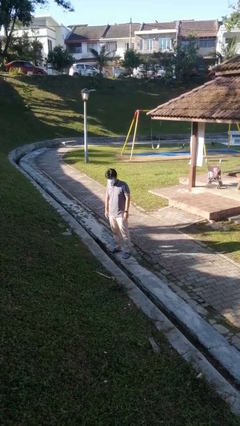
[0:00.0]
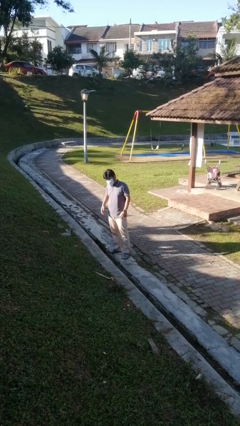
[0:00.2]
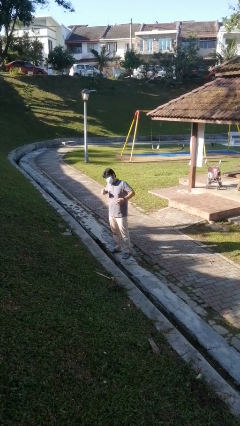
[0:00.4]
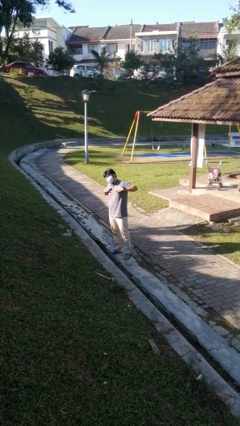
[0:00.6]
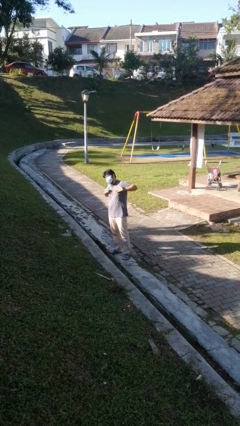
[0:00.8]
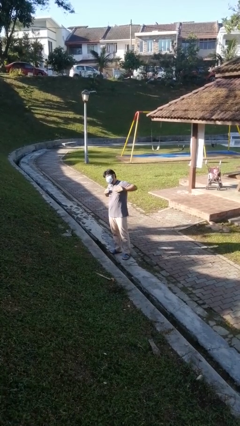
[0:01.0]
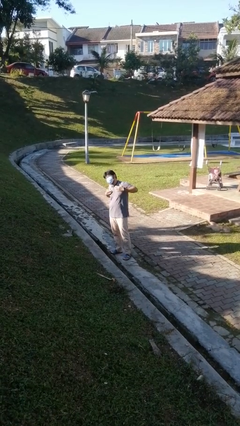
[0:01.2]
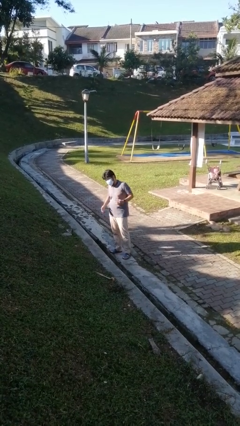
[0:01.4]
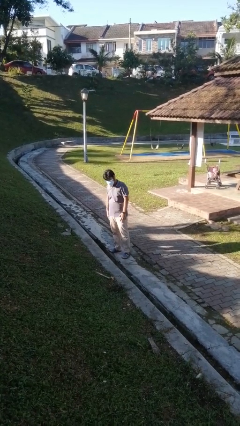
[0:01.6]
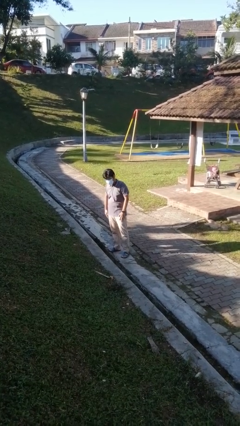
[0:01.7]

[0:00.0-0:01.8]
person drums on chest

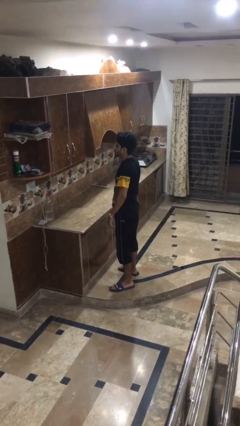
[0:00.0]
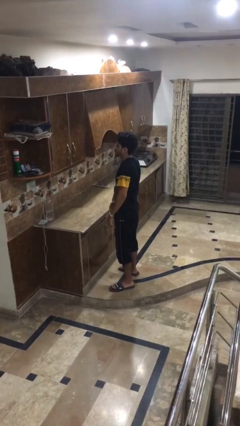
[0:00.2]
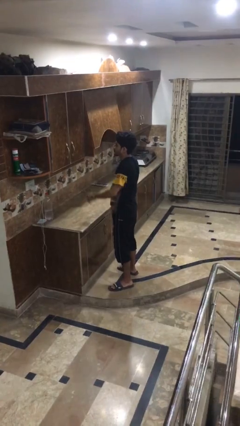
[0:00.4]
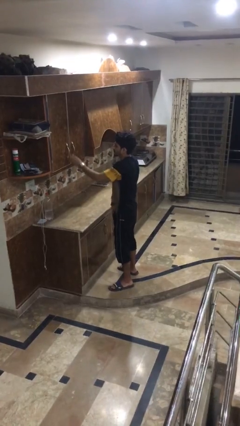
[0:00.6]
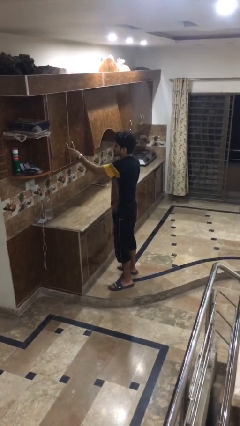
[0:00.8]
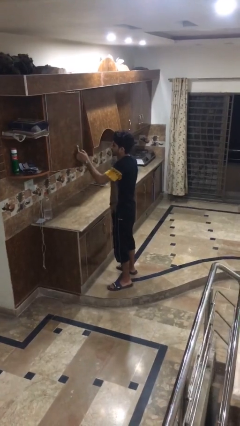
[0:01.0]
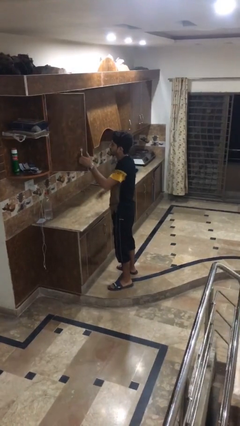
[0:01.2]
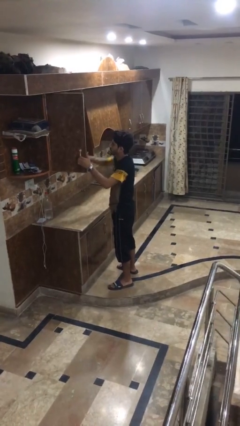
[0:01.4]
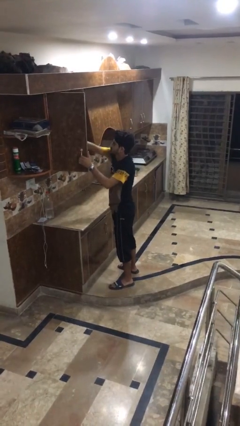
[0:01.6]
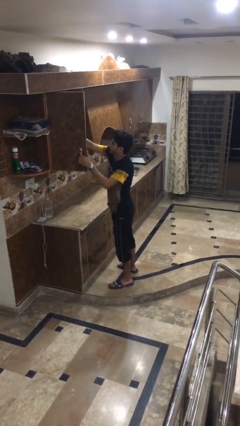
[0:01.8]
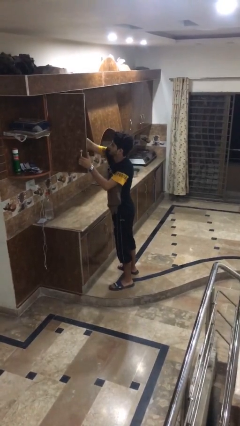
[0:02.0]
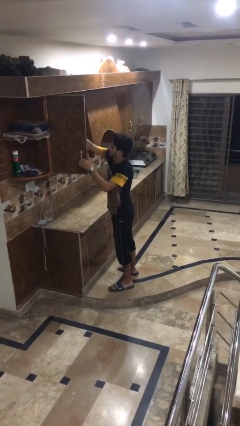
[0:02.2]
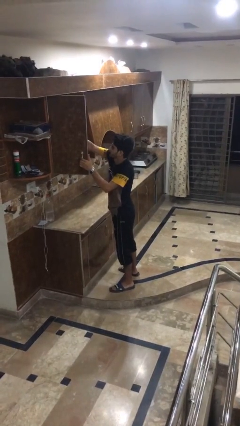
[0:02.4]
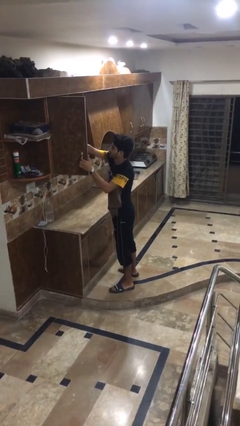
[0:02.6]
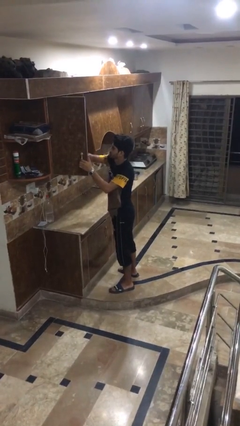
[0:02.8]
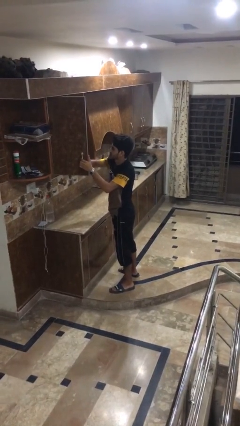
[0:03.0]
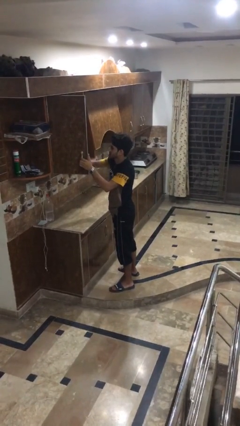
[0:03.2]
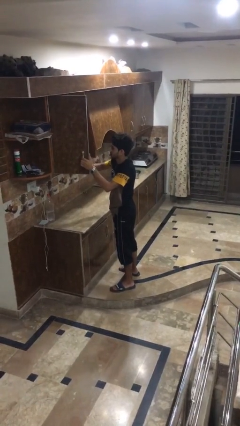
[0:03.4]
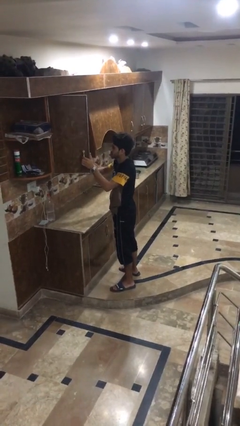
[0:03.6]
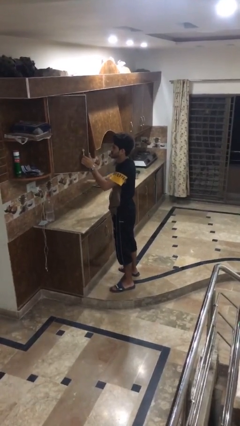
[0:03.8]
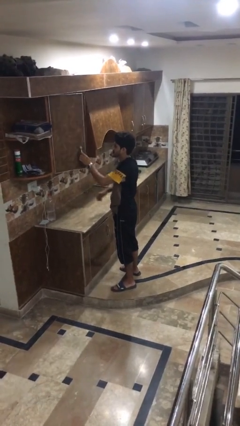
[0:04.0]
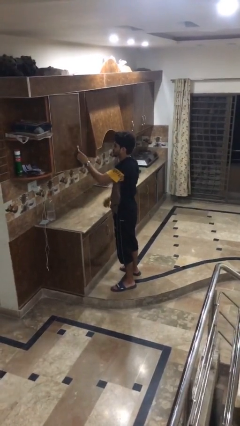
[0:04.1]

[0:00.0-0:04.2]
person searches in cabinet

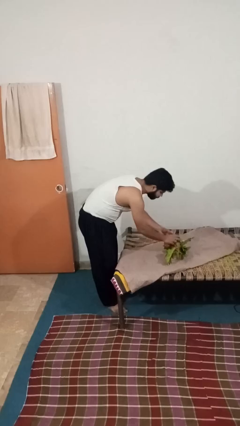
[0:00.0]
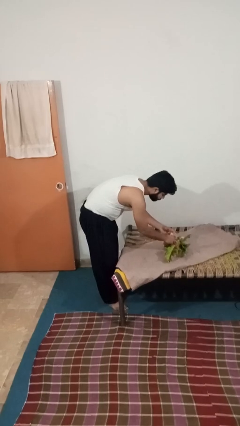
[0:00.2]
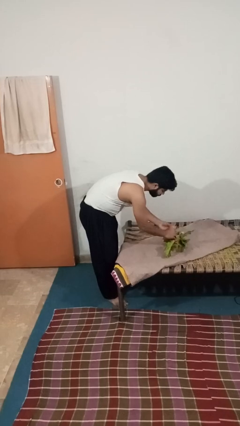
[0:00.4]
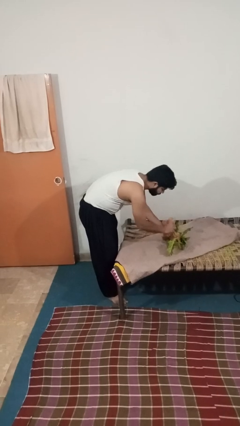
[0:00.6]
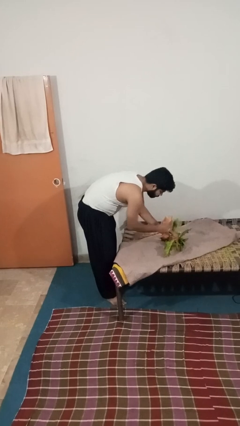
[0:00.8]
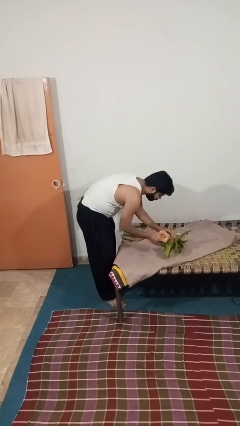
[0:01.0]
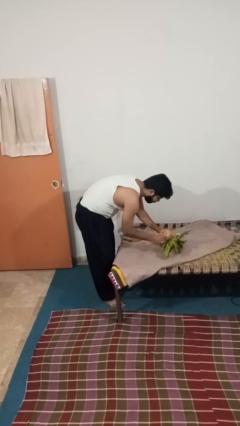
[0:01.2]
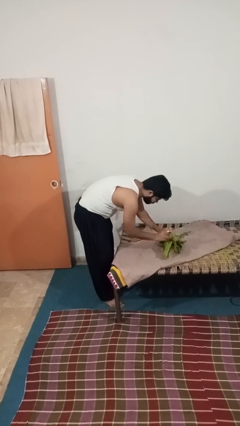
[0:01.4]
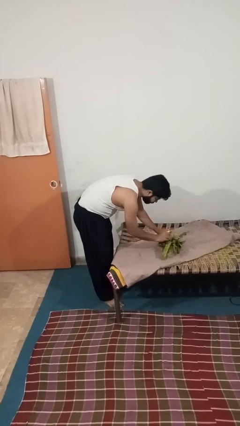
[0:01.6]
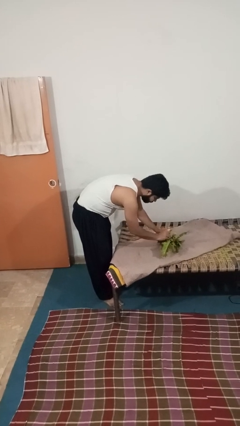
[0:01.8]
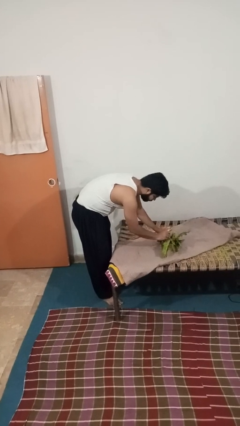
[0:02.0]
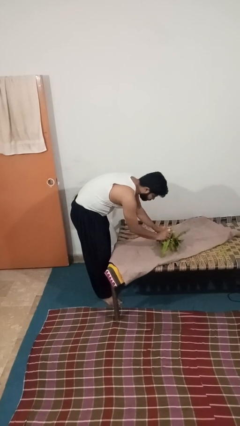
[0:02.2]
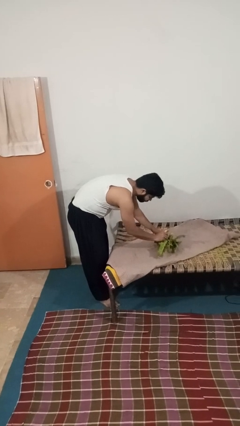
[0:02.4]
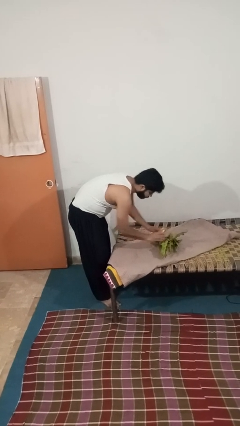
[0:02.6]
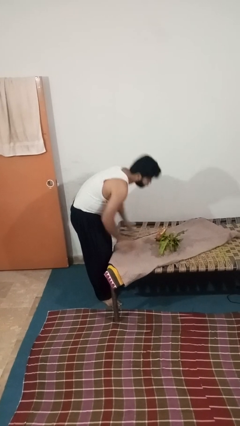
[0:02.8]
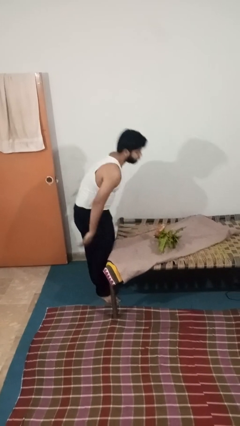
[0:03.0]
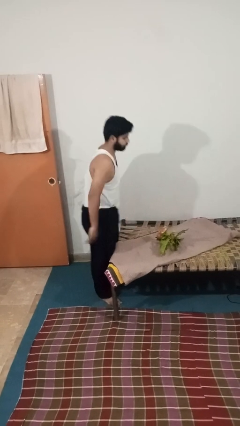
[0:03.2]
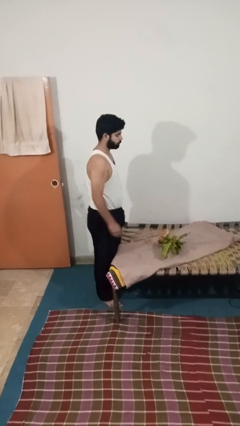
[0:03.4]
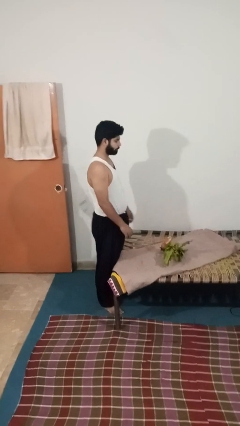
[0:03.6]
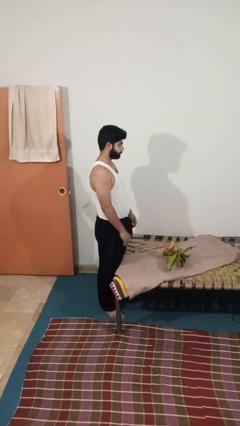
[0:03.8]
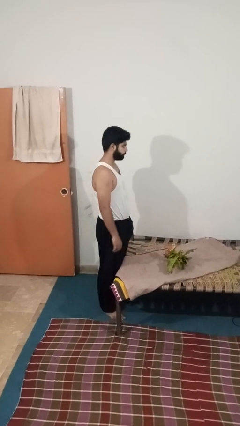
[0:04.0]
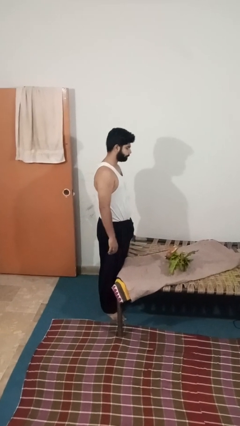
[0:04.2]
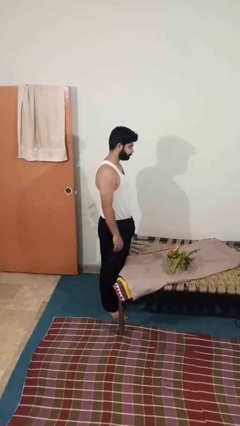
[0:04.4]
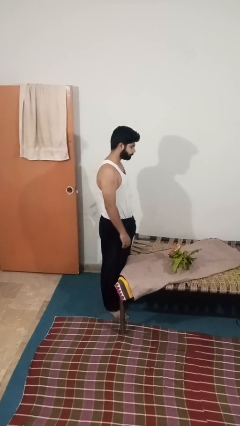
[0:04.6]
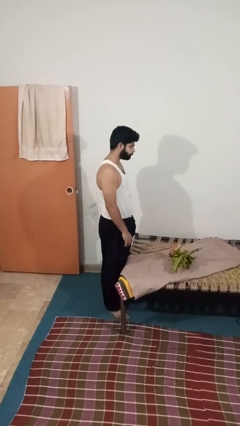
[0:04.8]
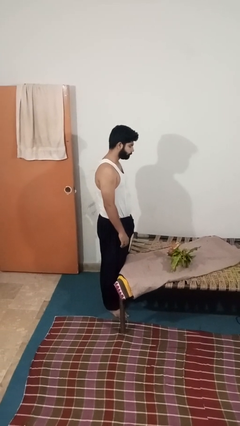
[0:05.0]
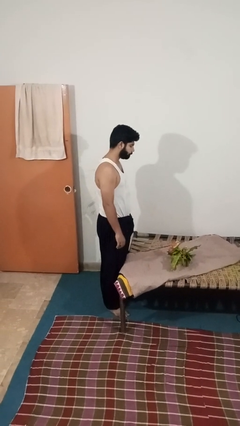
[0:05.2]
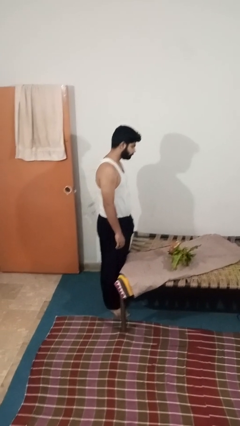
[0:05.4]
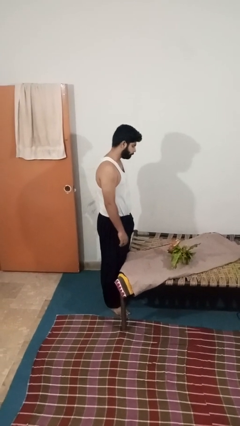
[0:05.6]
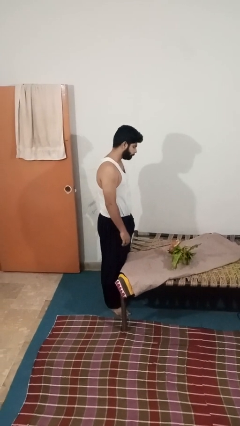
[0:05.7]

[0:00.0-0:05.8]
person climbs on chair

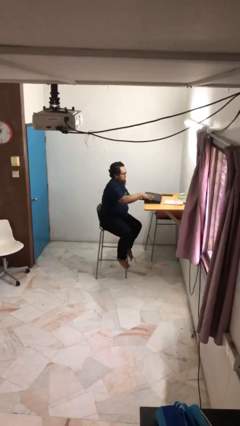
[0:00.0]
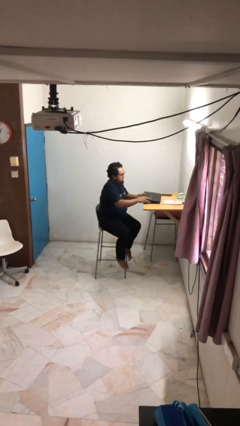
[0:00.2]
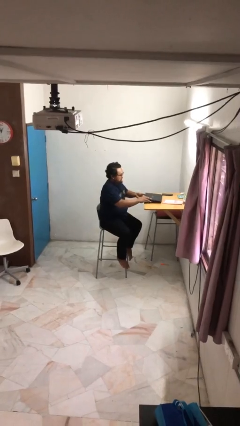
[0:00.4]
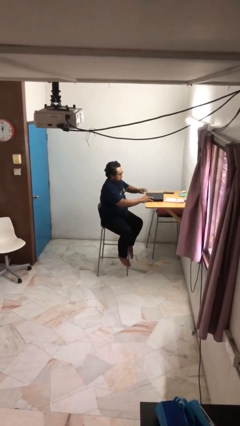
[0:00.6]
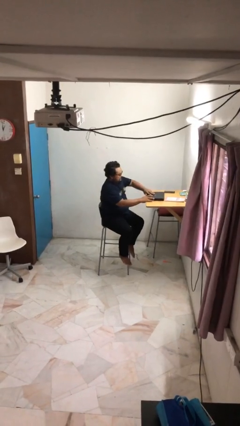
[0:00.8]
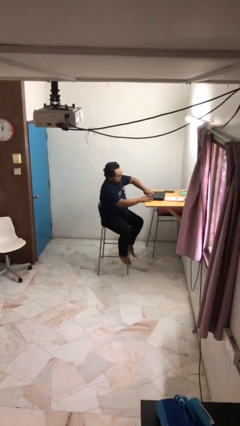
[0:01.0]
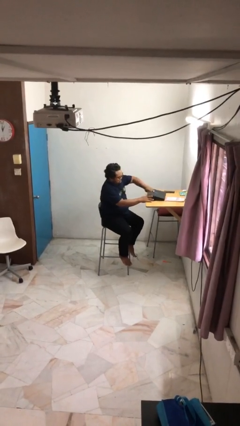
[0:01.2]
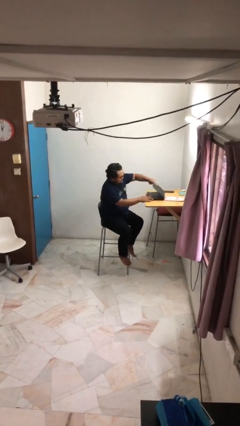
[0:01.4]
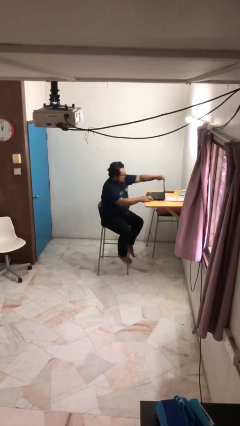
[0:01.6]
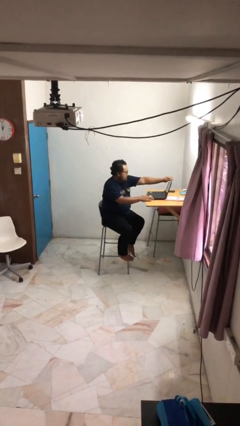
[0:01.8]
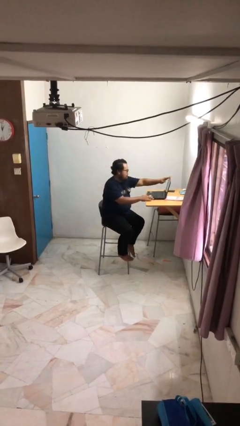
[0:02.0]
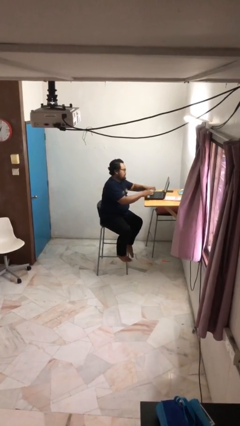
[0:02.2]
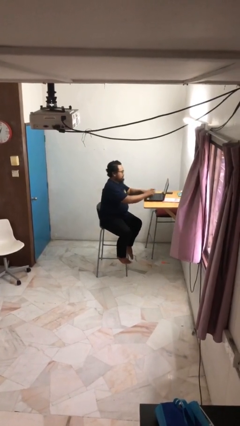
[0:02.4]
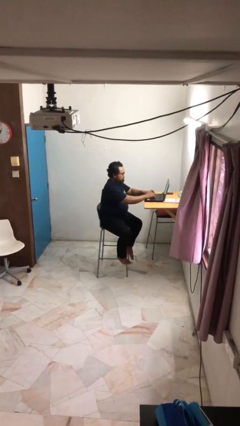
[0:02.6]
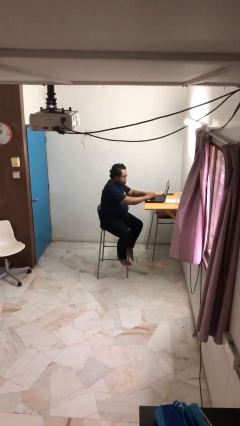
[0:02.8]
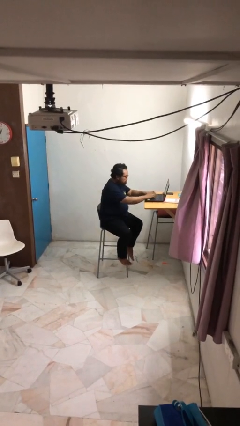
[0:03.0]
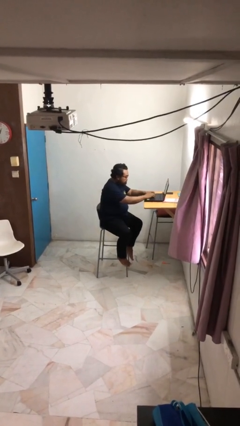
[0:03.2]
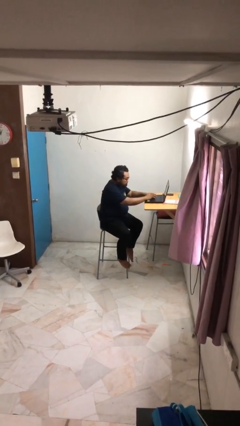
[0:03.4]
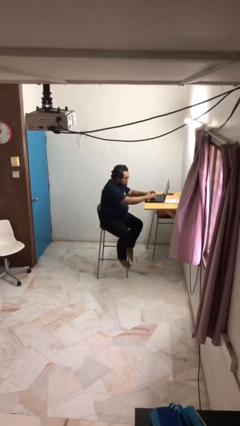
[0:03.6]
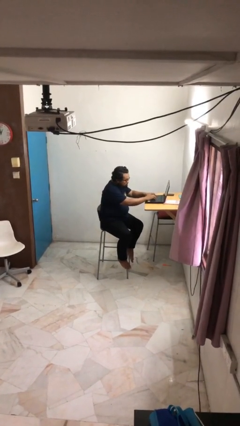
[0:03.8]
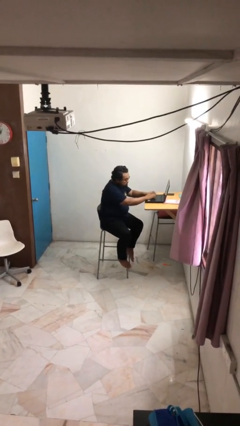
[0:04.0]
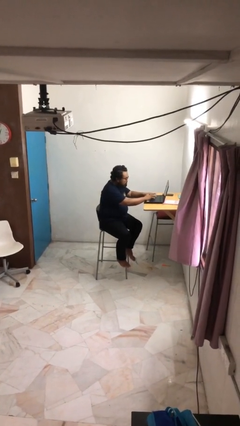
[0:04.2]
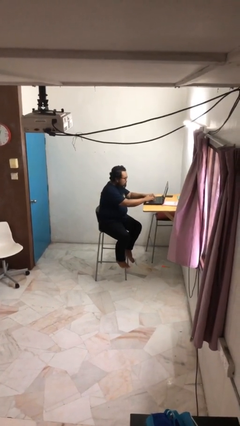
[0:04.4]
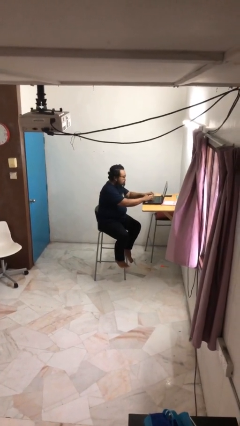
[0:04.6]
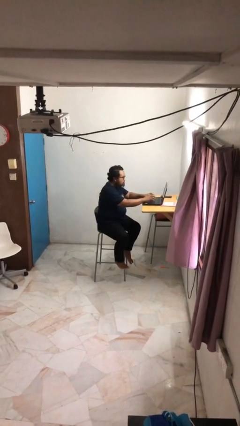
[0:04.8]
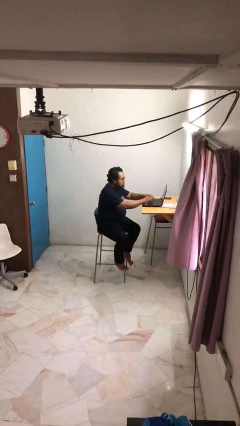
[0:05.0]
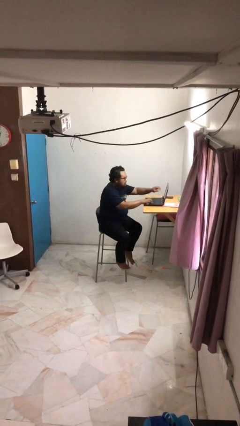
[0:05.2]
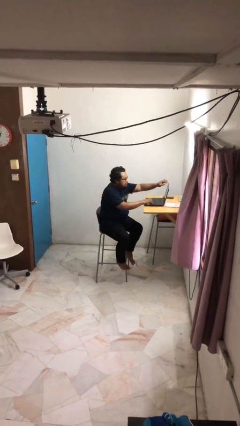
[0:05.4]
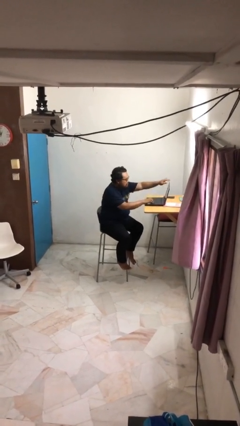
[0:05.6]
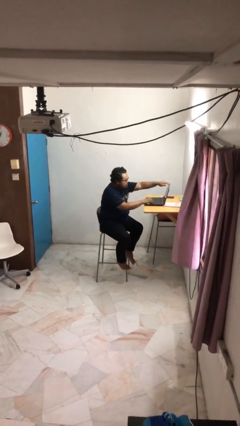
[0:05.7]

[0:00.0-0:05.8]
person interacts with laptop
